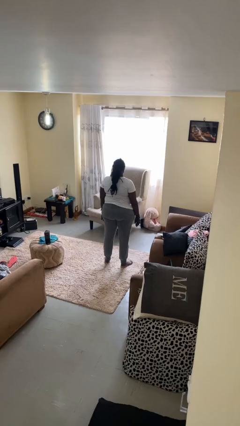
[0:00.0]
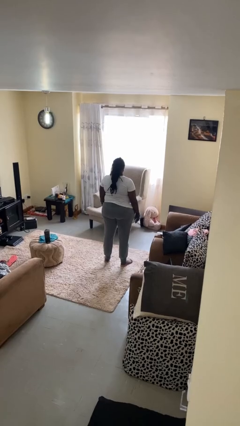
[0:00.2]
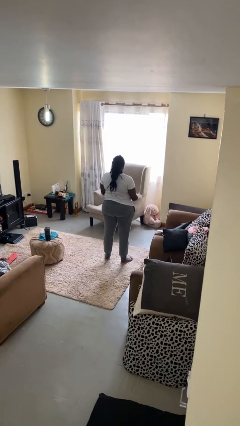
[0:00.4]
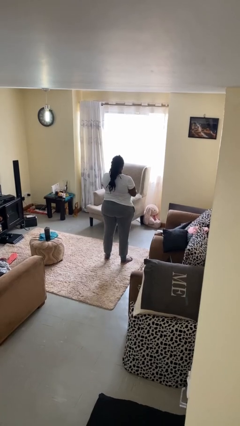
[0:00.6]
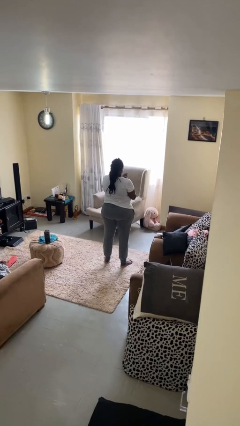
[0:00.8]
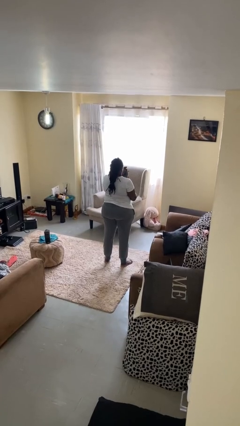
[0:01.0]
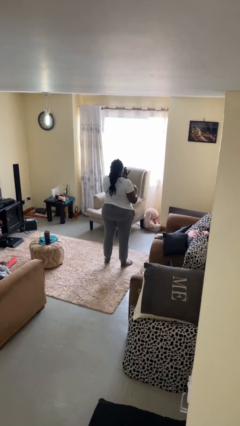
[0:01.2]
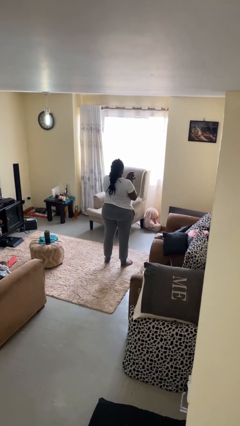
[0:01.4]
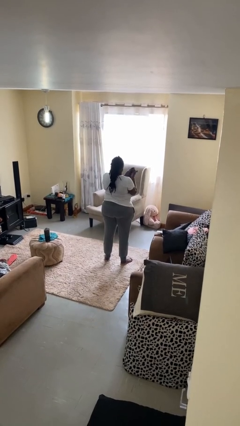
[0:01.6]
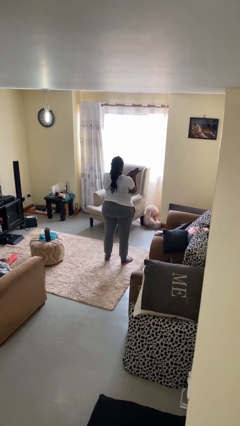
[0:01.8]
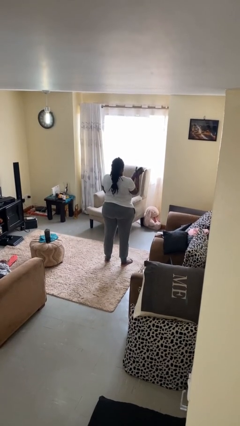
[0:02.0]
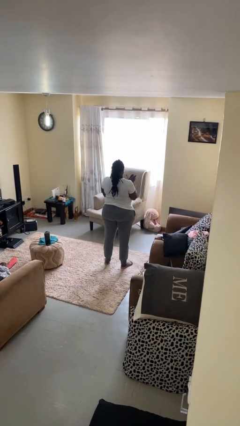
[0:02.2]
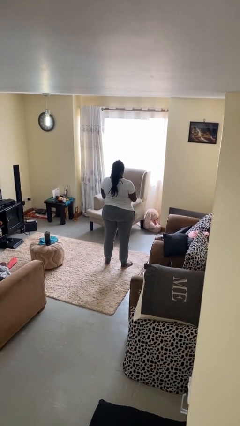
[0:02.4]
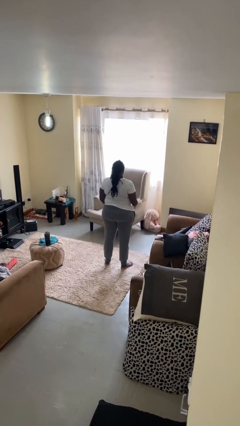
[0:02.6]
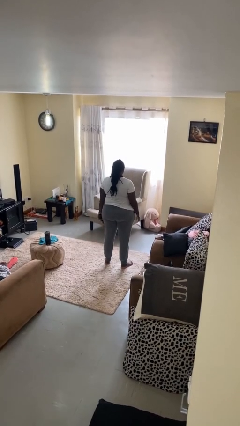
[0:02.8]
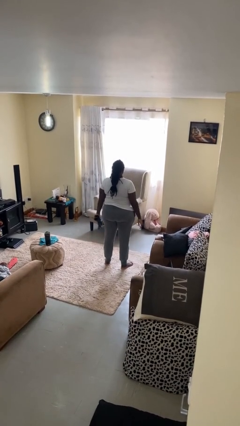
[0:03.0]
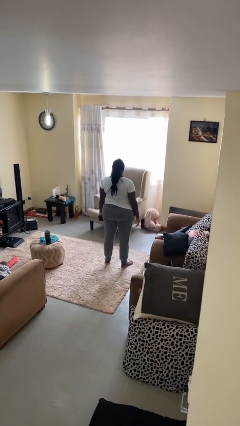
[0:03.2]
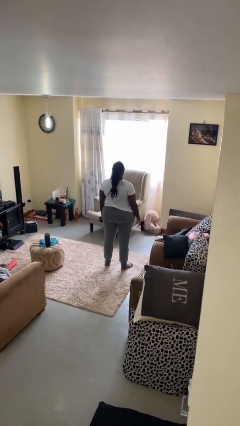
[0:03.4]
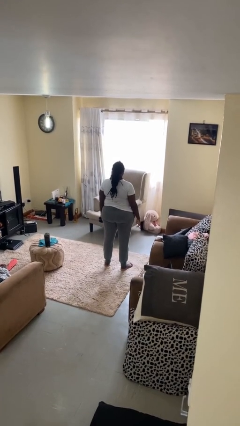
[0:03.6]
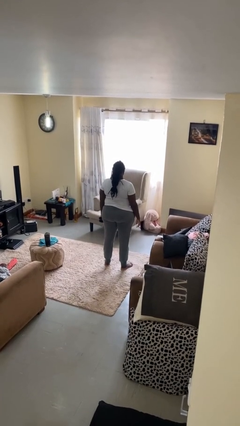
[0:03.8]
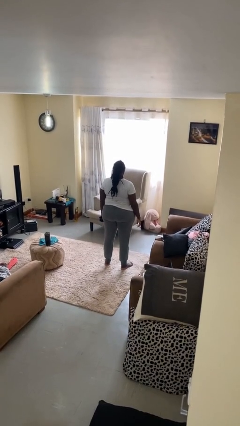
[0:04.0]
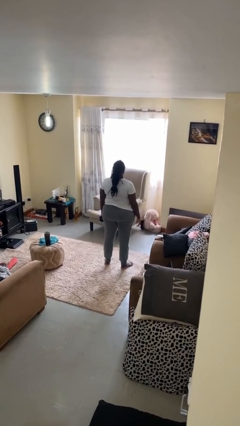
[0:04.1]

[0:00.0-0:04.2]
person takes off gloves

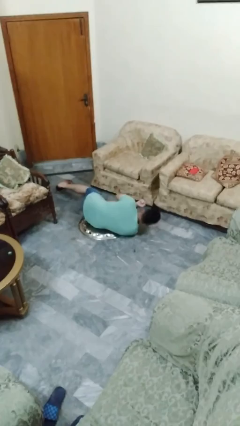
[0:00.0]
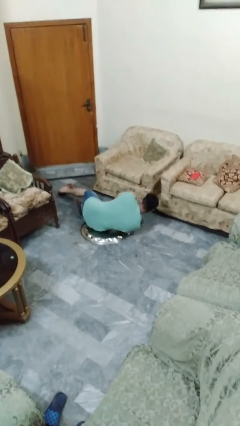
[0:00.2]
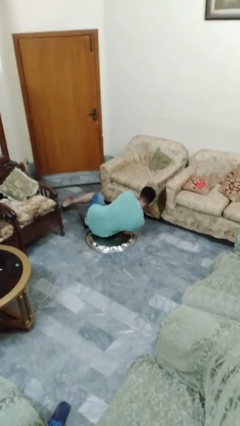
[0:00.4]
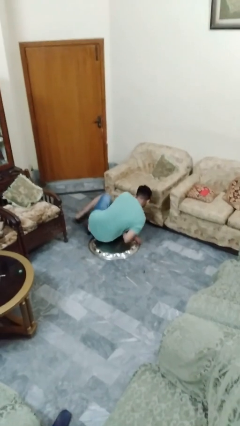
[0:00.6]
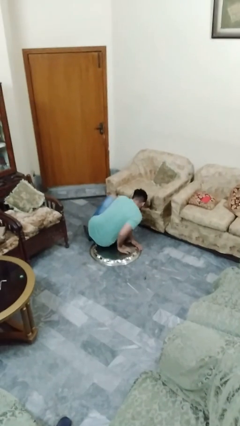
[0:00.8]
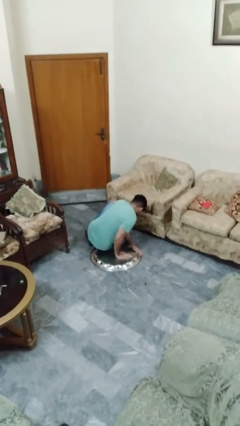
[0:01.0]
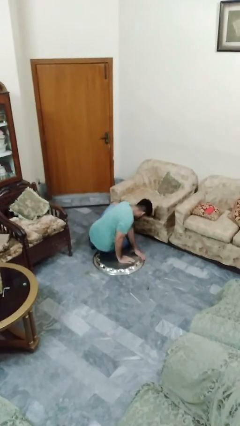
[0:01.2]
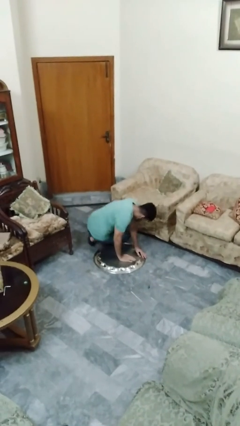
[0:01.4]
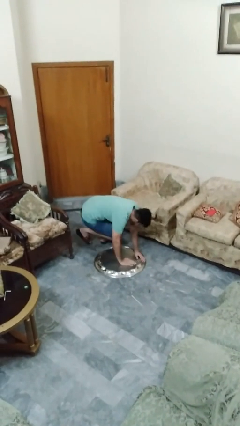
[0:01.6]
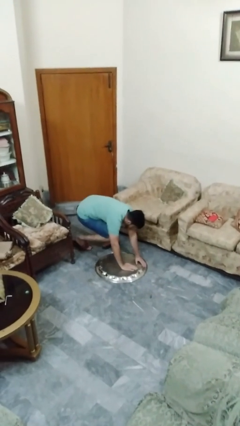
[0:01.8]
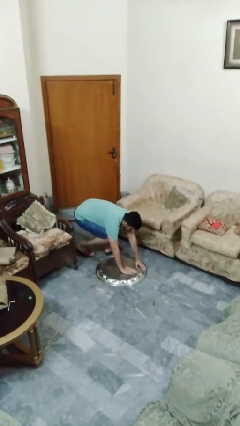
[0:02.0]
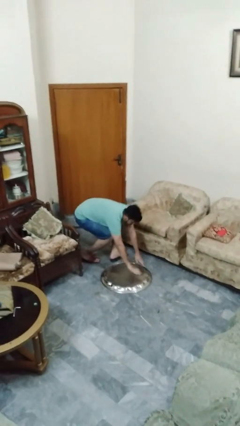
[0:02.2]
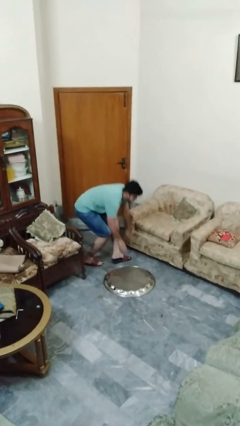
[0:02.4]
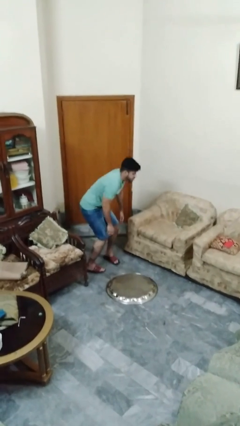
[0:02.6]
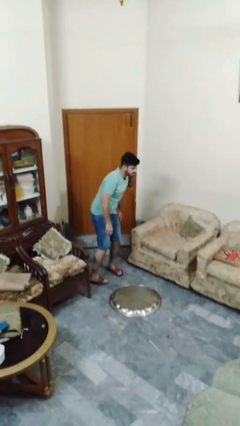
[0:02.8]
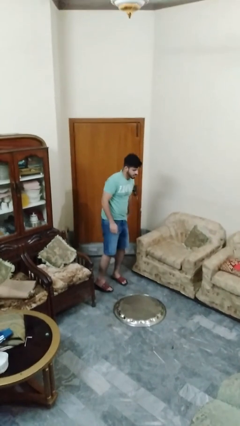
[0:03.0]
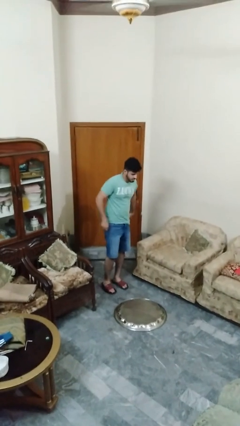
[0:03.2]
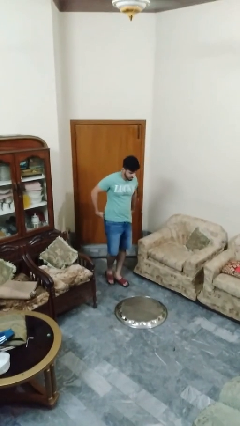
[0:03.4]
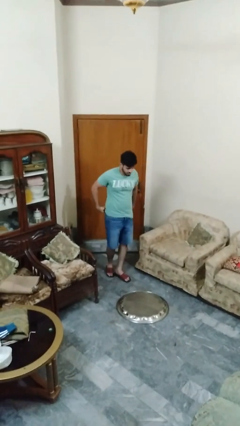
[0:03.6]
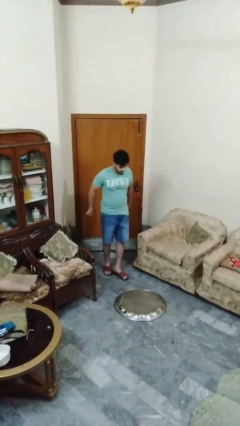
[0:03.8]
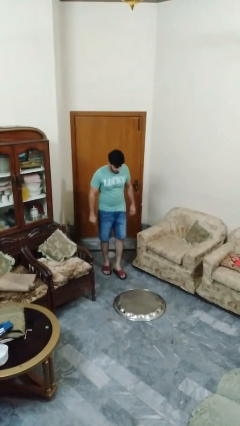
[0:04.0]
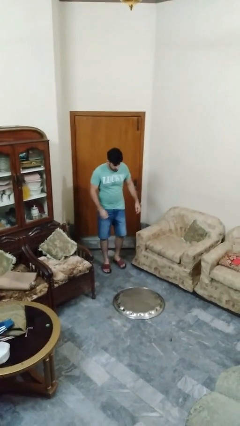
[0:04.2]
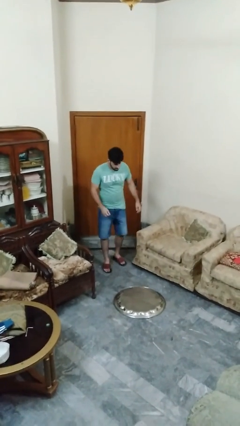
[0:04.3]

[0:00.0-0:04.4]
person stands up from floor

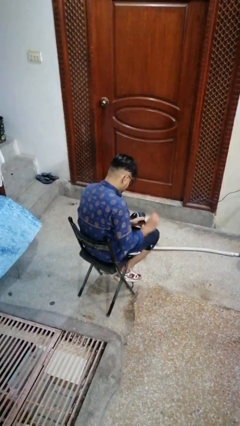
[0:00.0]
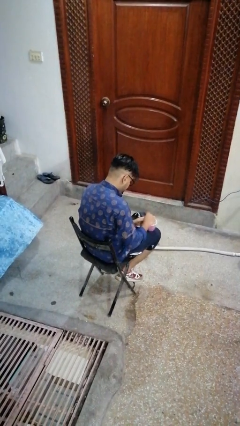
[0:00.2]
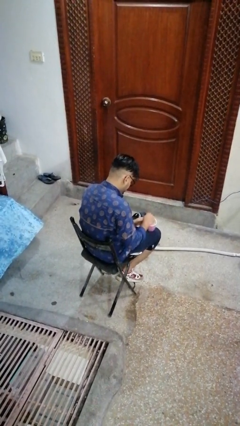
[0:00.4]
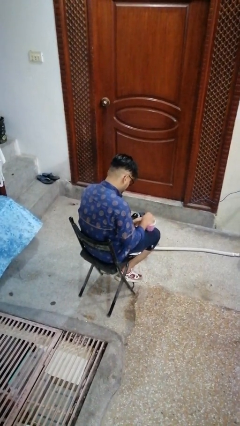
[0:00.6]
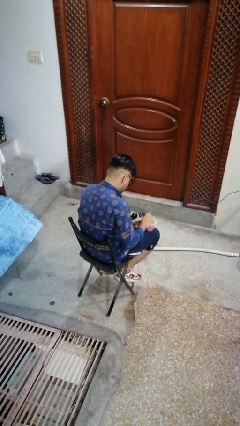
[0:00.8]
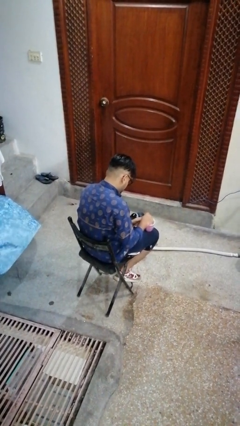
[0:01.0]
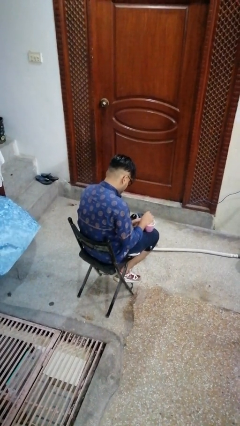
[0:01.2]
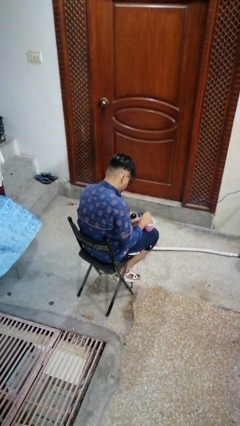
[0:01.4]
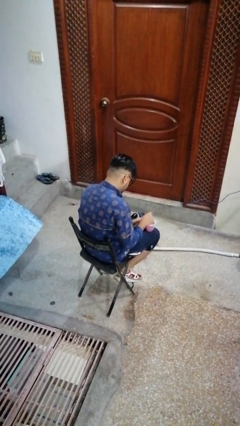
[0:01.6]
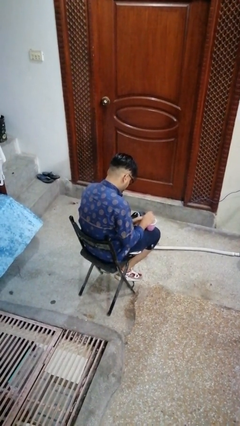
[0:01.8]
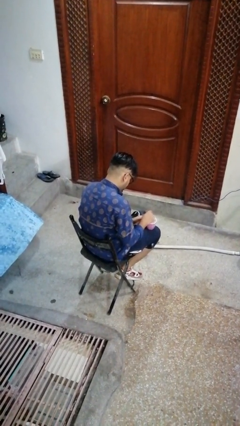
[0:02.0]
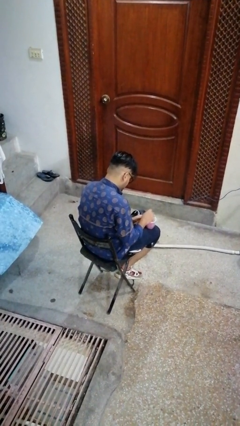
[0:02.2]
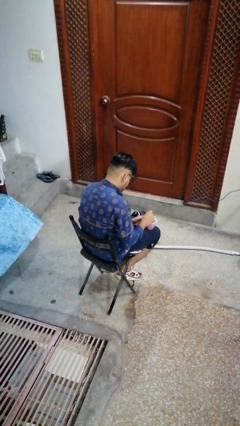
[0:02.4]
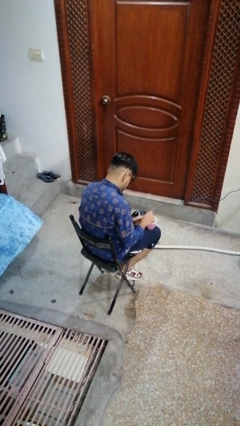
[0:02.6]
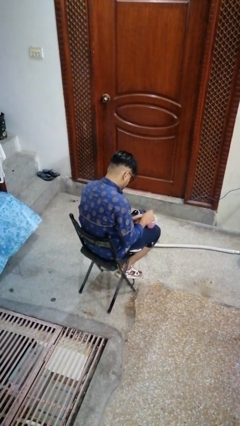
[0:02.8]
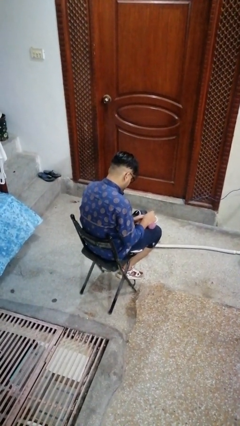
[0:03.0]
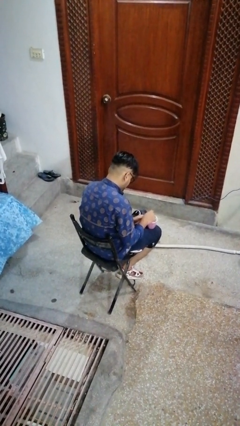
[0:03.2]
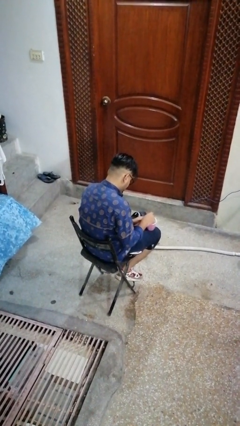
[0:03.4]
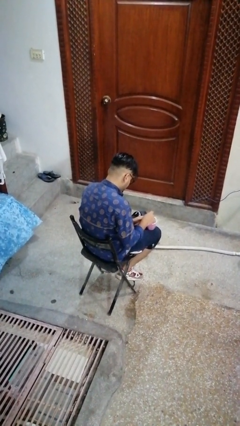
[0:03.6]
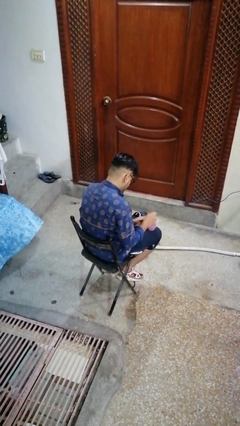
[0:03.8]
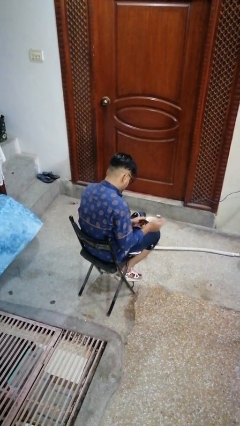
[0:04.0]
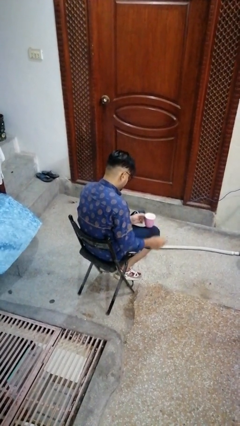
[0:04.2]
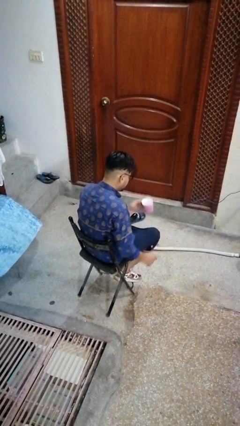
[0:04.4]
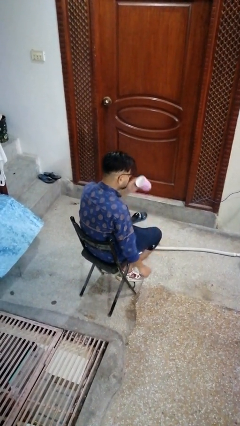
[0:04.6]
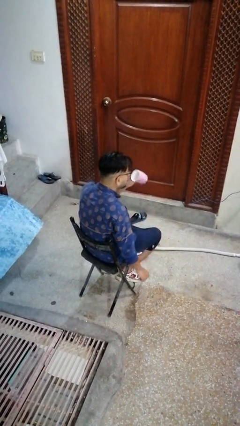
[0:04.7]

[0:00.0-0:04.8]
person stirs mug

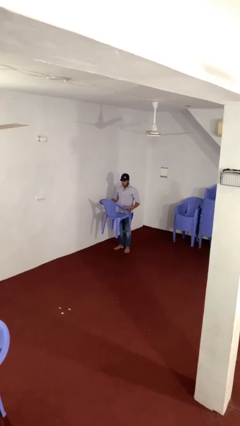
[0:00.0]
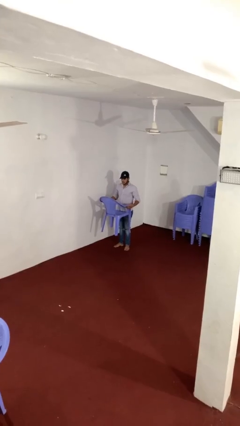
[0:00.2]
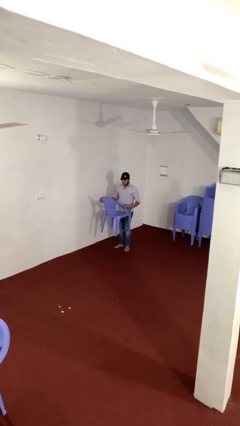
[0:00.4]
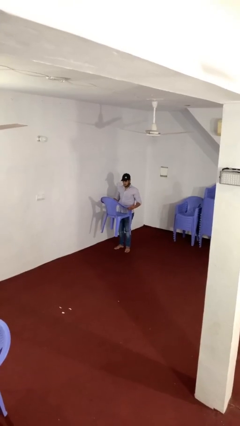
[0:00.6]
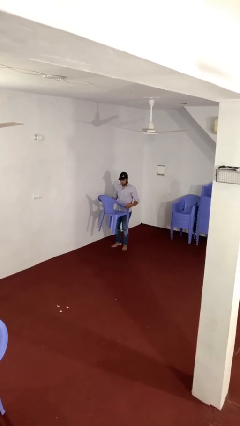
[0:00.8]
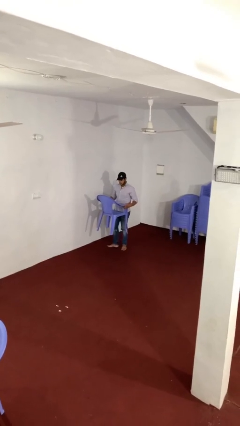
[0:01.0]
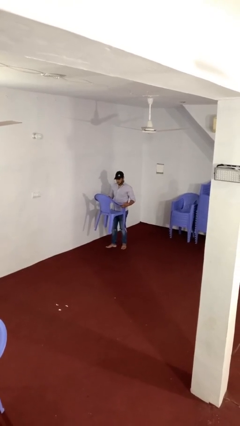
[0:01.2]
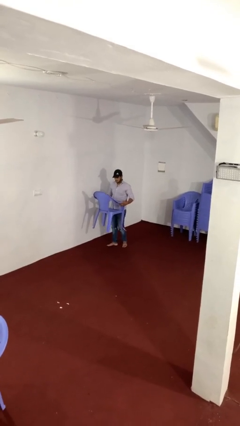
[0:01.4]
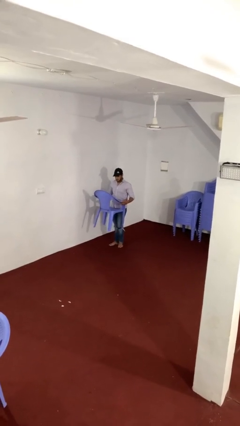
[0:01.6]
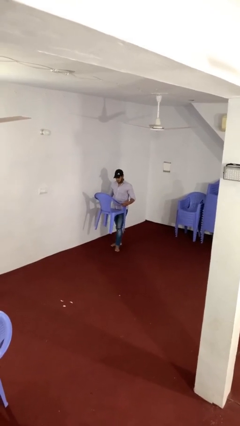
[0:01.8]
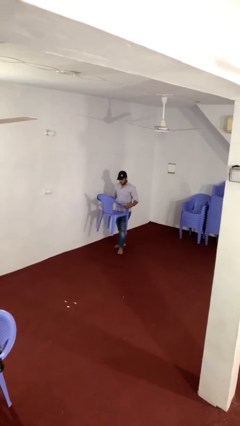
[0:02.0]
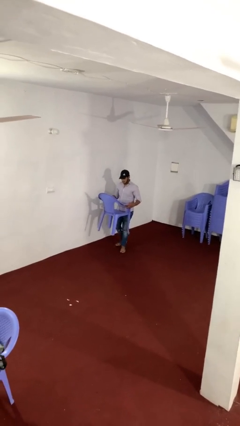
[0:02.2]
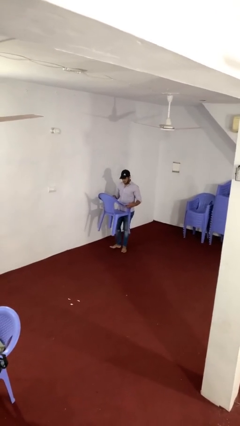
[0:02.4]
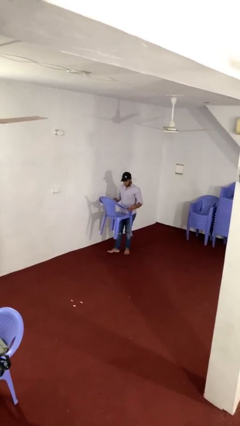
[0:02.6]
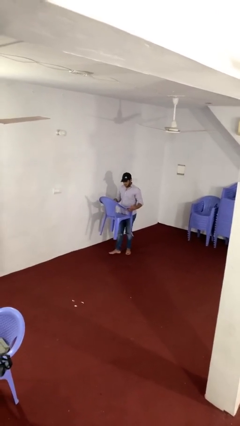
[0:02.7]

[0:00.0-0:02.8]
person carries heavy object

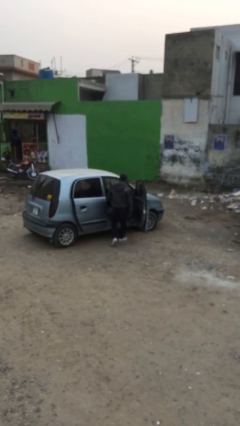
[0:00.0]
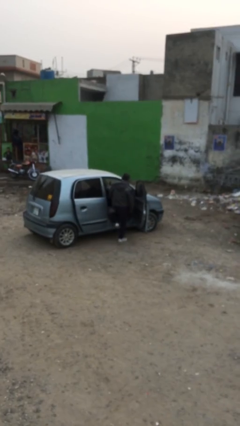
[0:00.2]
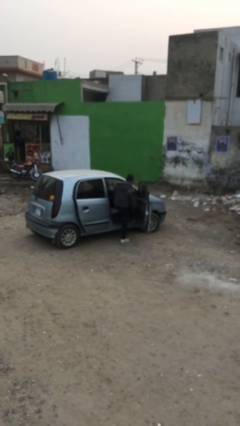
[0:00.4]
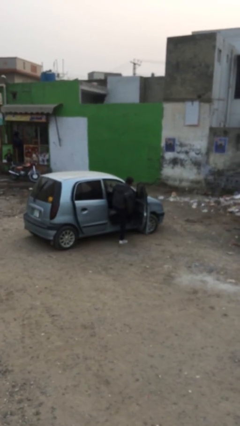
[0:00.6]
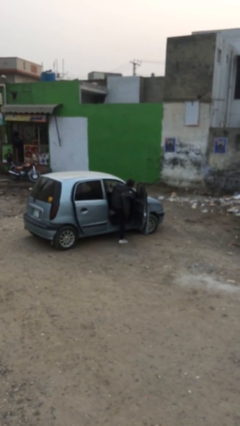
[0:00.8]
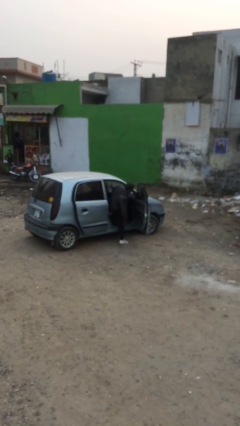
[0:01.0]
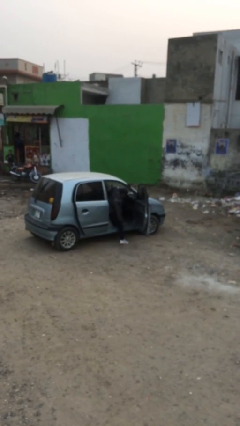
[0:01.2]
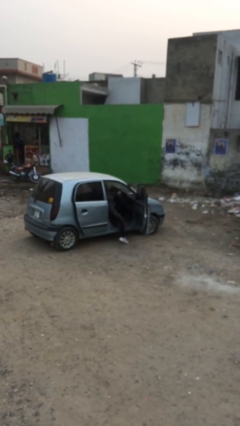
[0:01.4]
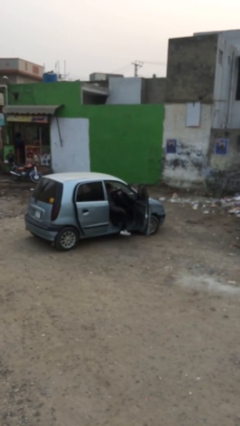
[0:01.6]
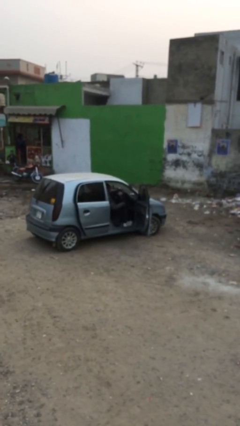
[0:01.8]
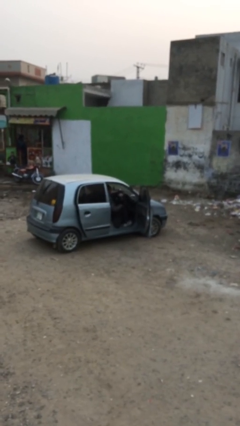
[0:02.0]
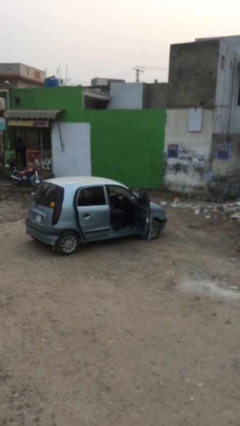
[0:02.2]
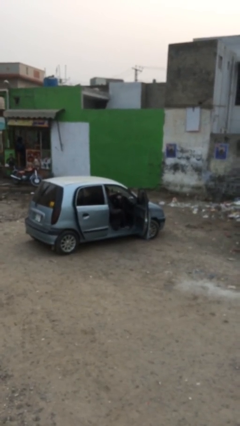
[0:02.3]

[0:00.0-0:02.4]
person enters car
